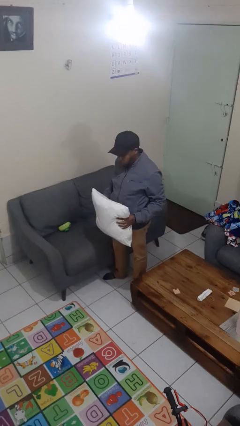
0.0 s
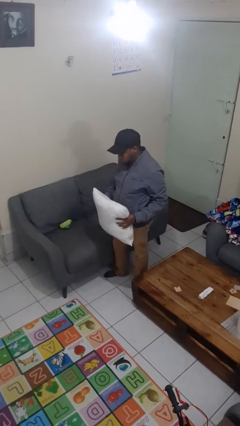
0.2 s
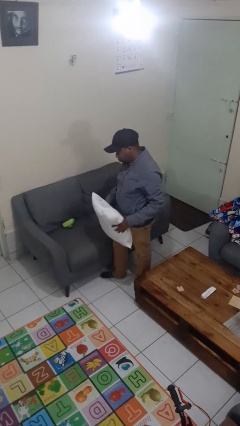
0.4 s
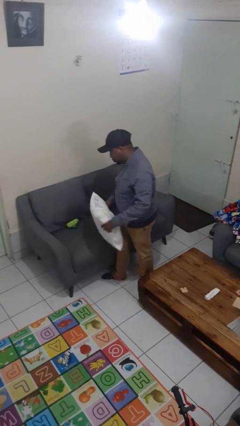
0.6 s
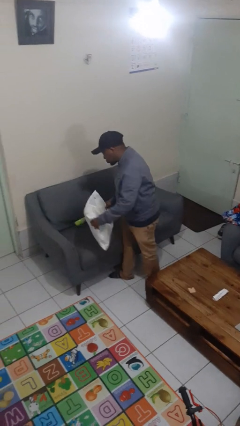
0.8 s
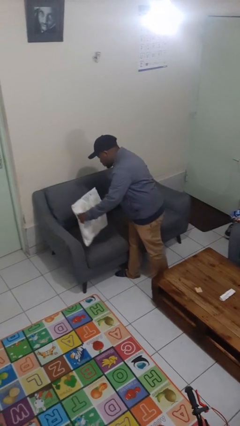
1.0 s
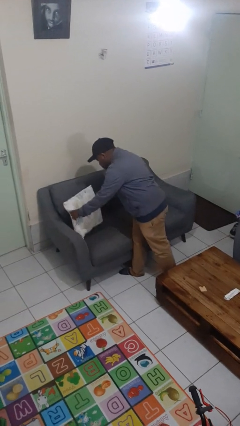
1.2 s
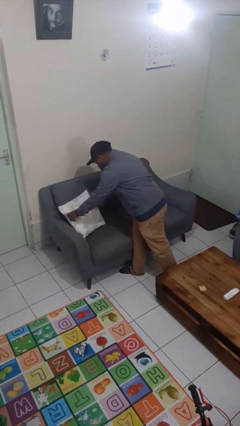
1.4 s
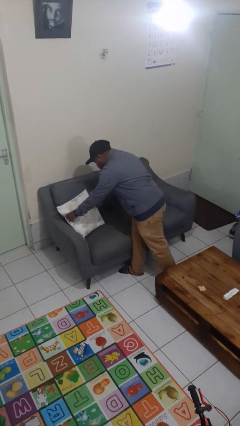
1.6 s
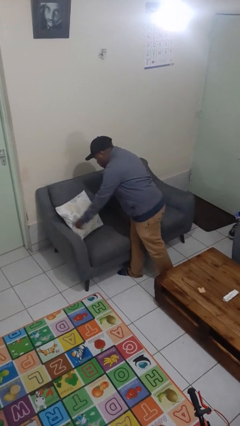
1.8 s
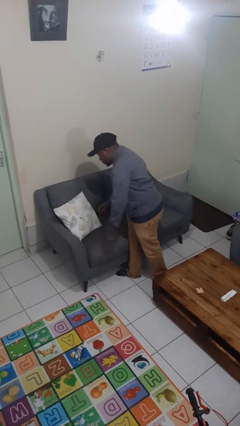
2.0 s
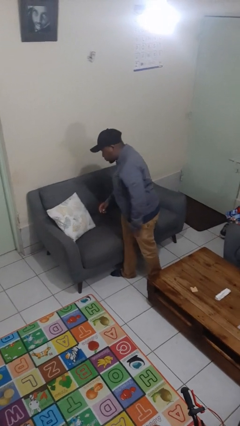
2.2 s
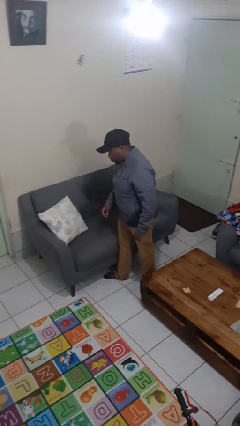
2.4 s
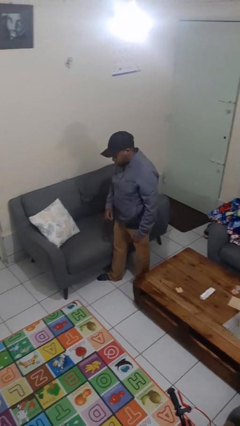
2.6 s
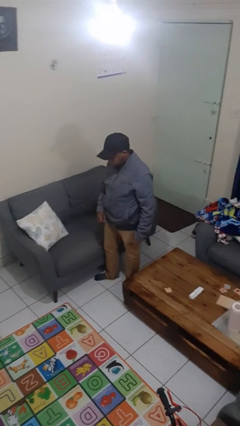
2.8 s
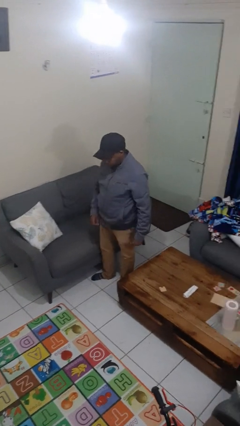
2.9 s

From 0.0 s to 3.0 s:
person puts down object on couch

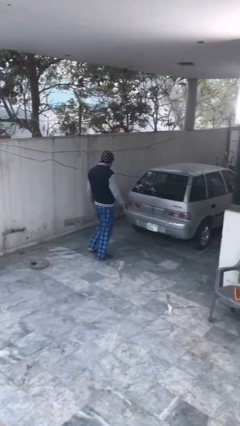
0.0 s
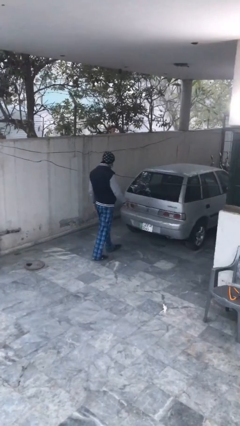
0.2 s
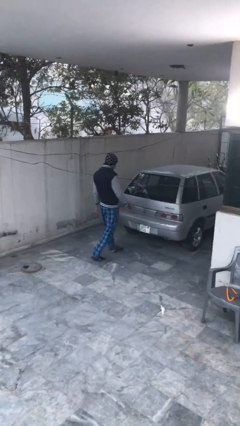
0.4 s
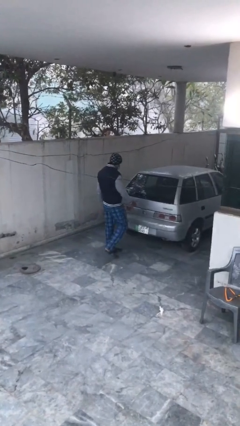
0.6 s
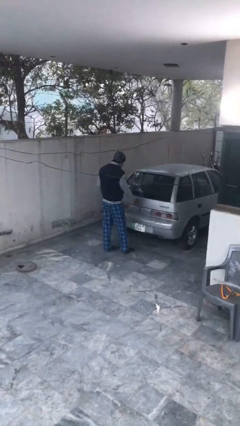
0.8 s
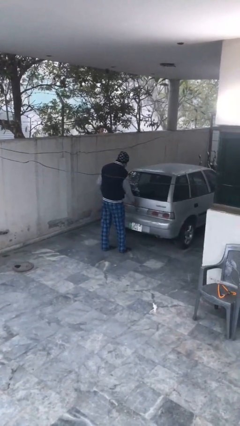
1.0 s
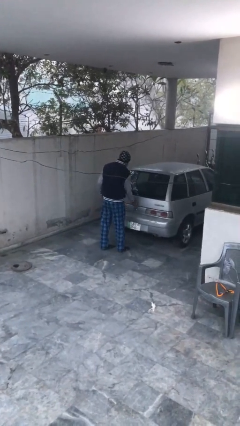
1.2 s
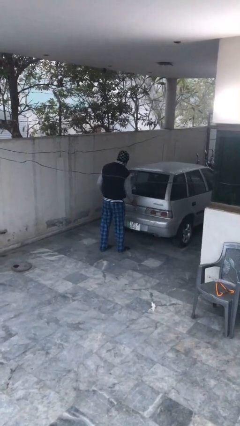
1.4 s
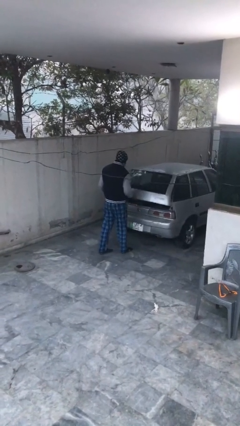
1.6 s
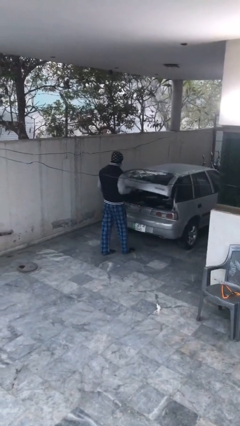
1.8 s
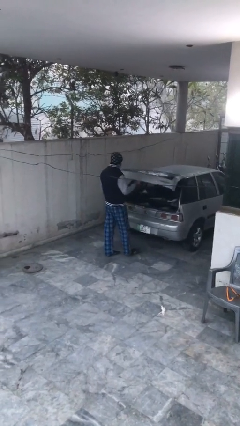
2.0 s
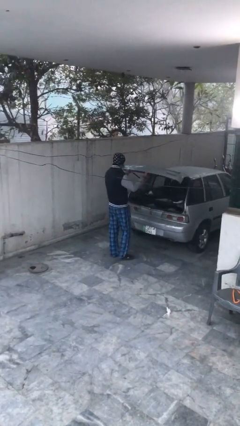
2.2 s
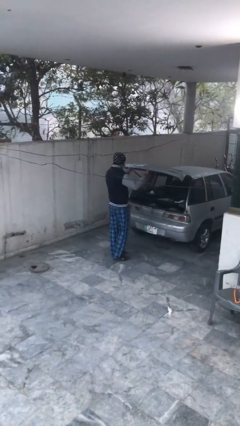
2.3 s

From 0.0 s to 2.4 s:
person opens car trunk

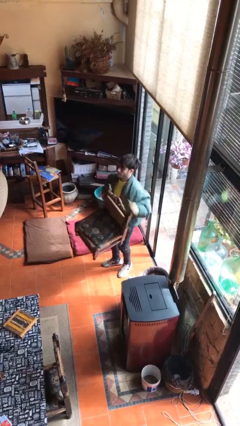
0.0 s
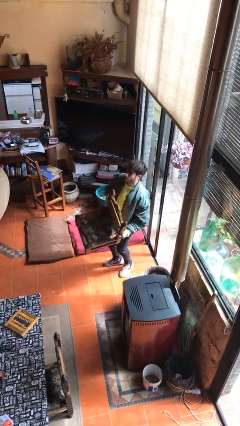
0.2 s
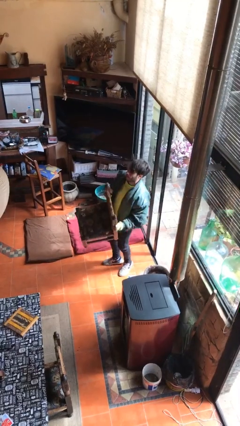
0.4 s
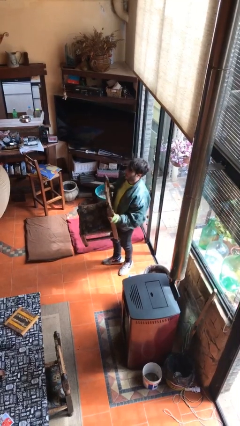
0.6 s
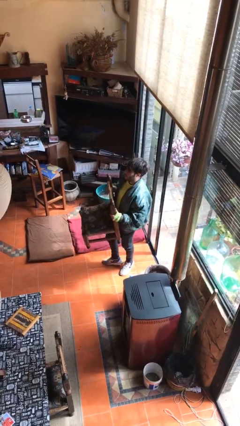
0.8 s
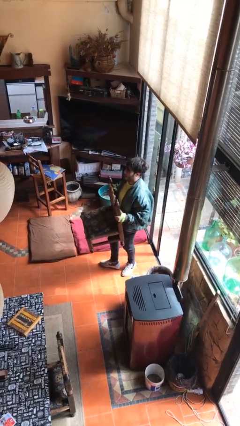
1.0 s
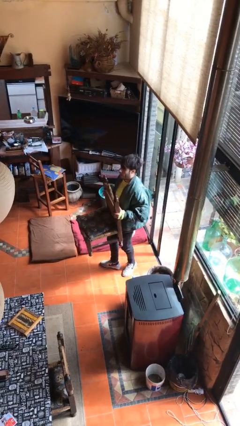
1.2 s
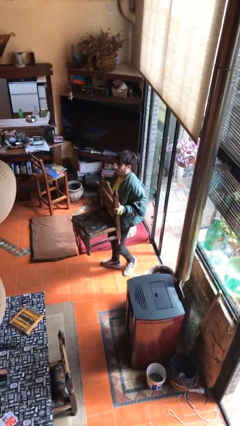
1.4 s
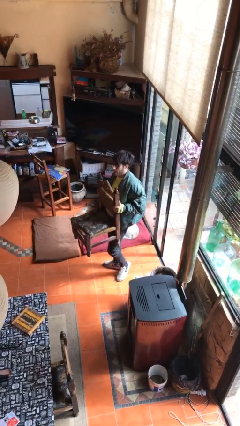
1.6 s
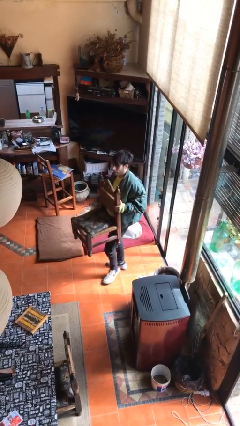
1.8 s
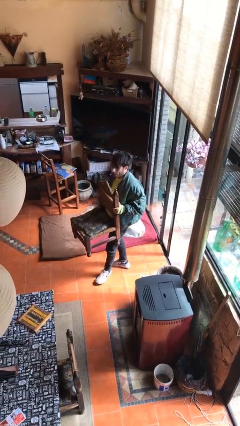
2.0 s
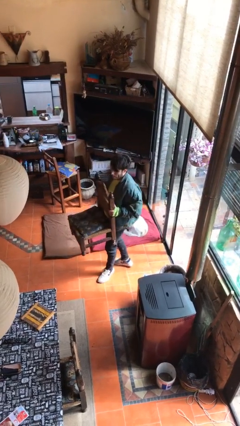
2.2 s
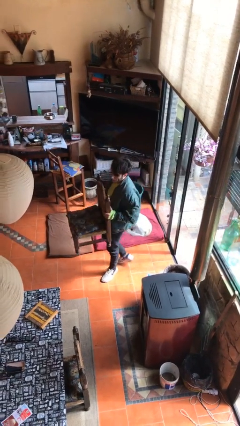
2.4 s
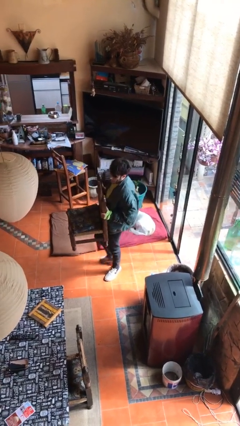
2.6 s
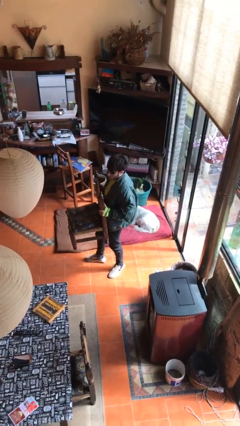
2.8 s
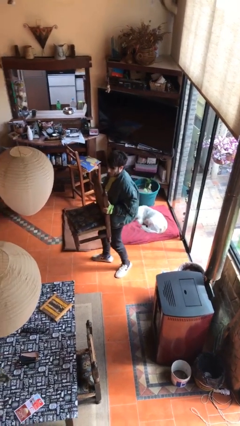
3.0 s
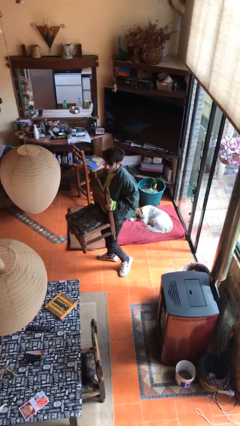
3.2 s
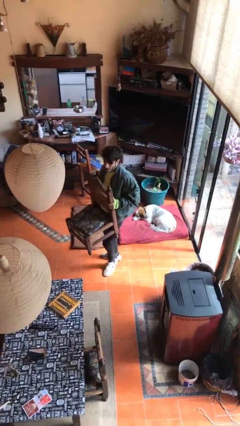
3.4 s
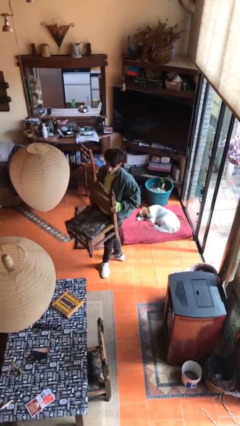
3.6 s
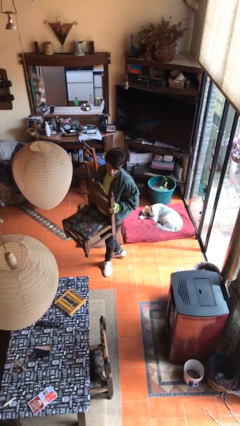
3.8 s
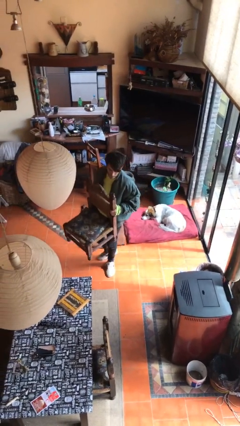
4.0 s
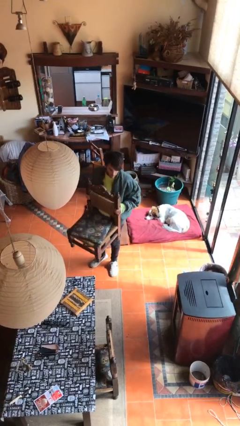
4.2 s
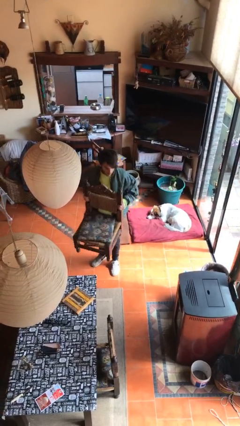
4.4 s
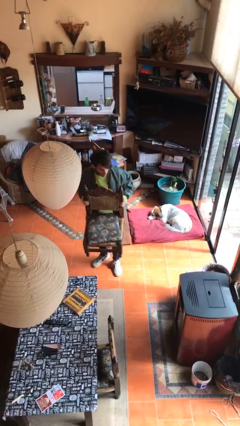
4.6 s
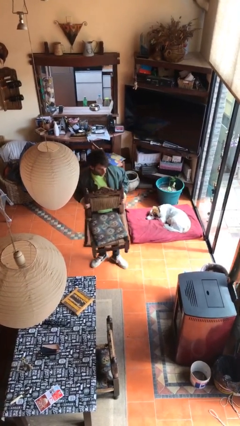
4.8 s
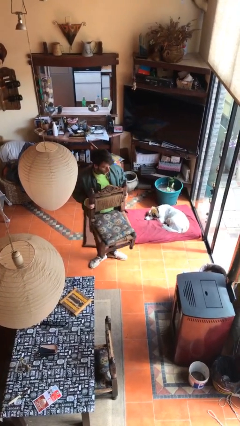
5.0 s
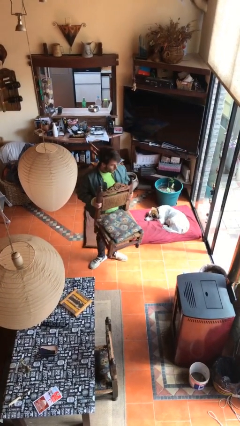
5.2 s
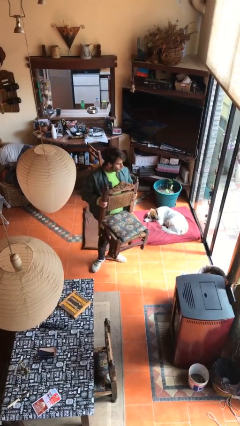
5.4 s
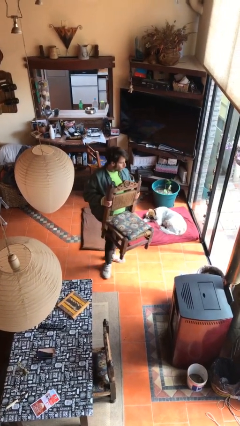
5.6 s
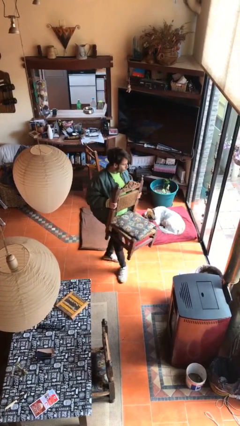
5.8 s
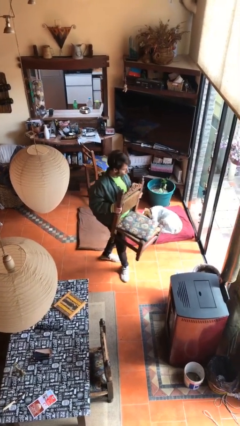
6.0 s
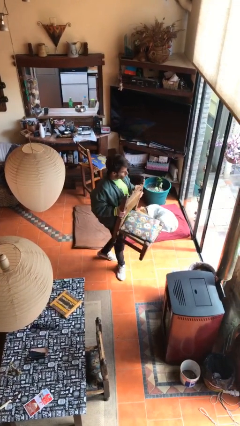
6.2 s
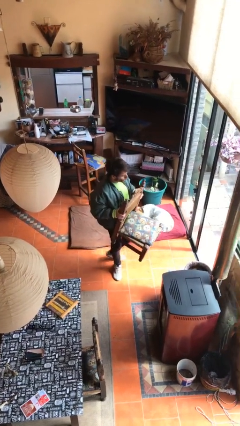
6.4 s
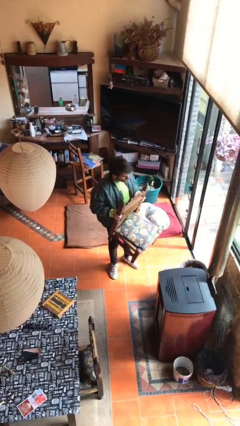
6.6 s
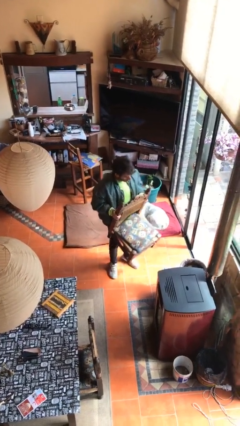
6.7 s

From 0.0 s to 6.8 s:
person carries heavy object

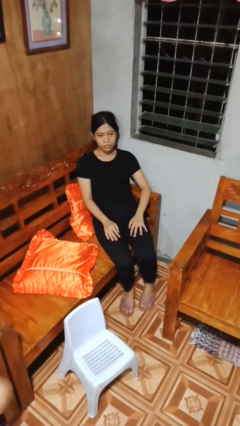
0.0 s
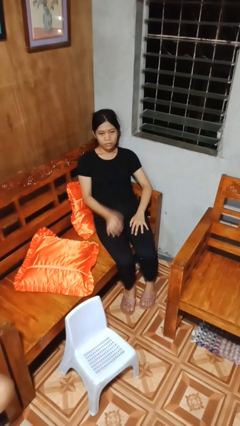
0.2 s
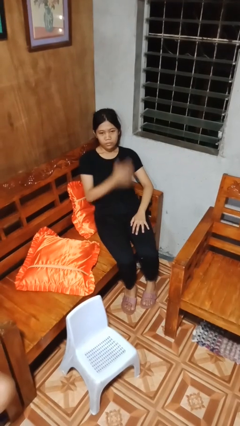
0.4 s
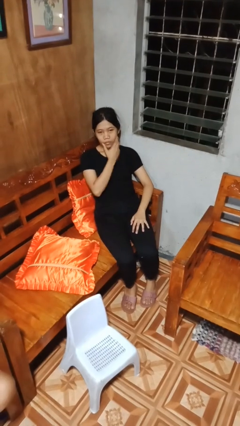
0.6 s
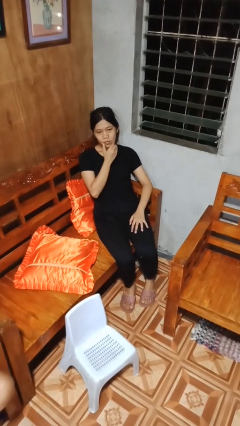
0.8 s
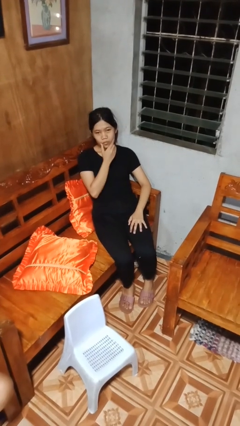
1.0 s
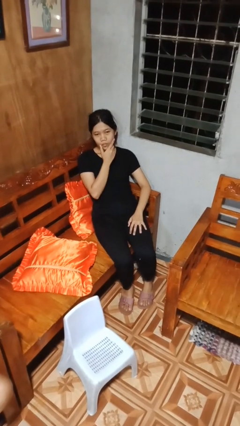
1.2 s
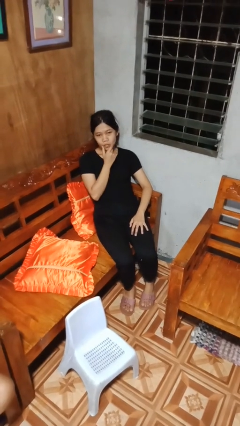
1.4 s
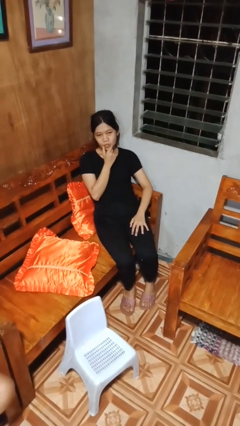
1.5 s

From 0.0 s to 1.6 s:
person strokes chin

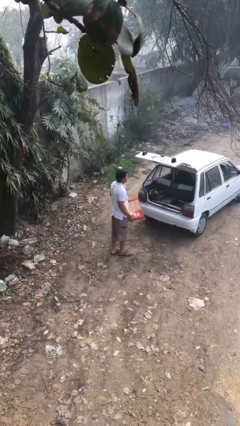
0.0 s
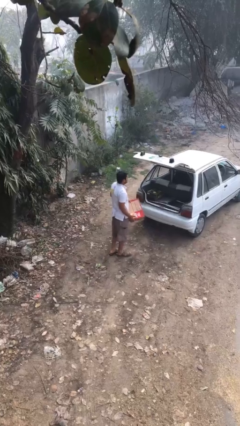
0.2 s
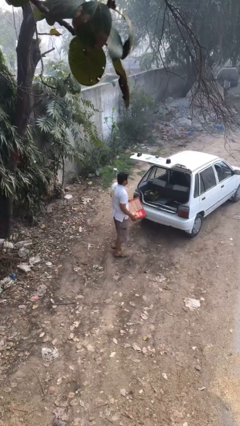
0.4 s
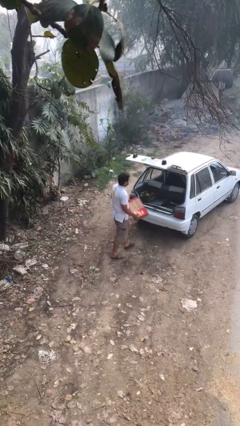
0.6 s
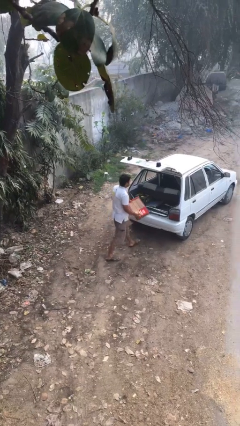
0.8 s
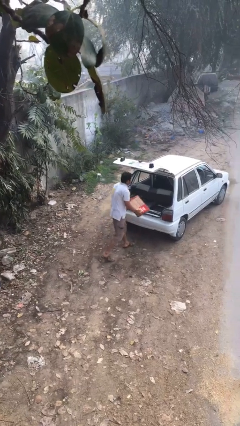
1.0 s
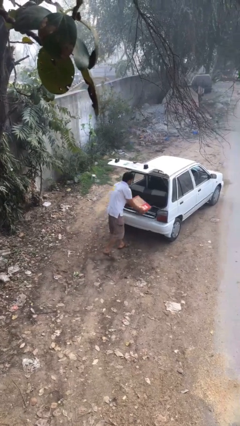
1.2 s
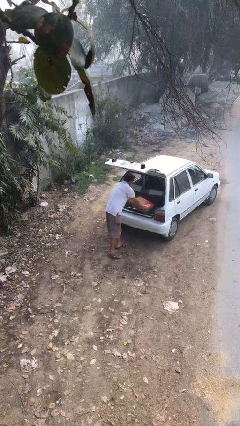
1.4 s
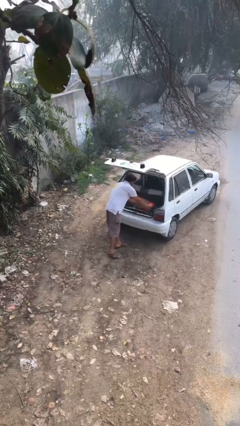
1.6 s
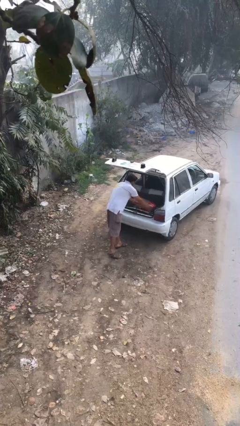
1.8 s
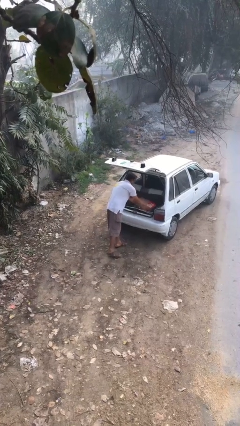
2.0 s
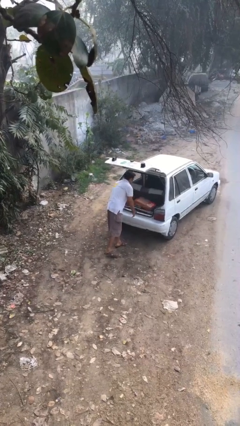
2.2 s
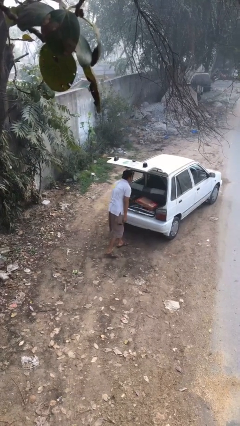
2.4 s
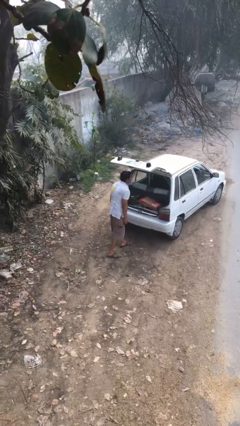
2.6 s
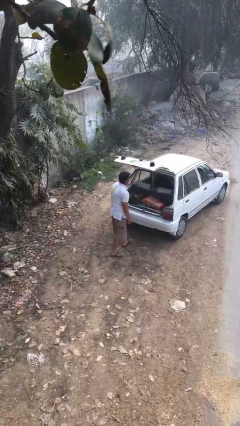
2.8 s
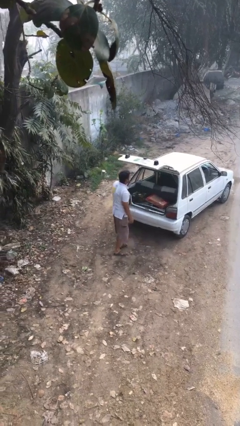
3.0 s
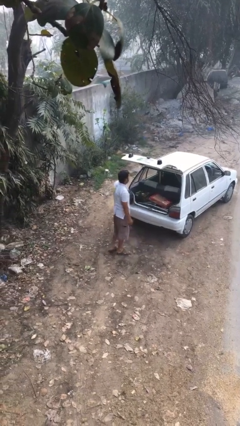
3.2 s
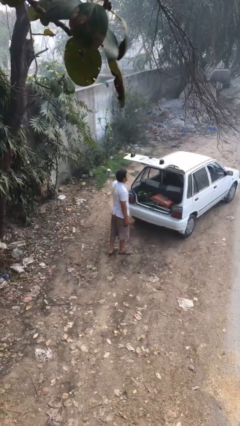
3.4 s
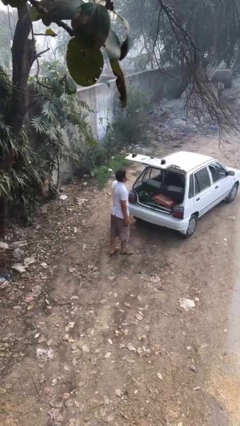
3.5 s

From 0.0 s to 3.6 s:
person loads car
